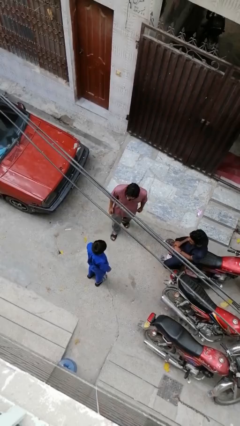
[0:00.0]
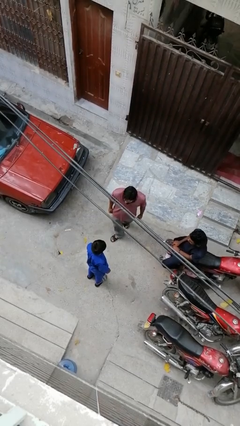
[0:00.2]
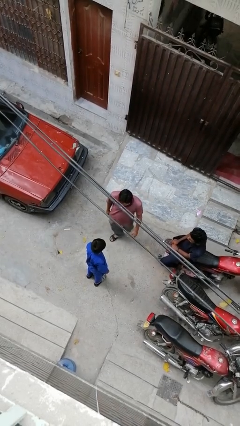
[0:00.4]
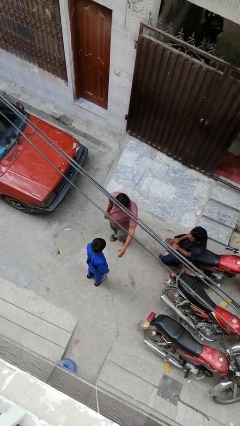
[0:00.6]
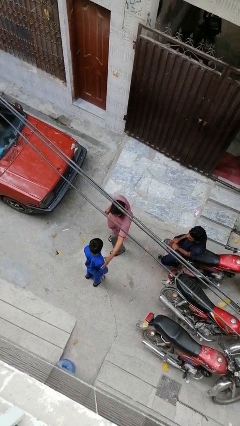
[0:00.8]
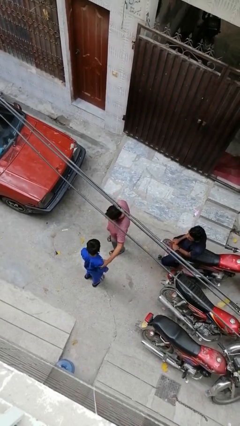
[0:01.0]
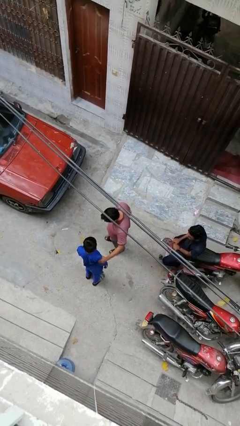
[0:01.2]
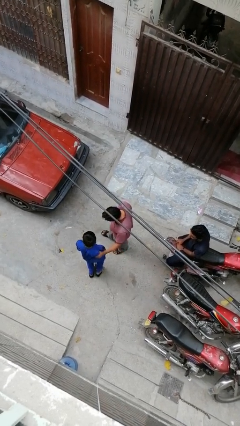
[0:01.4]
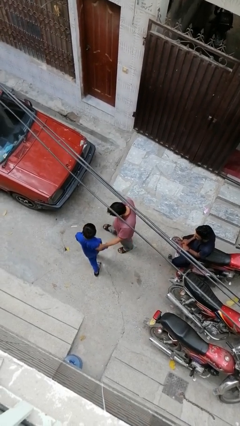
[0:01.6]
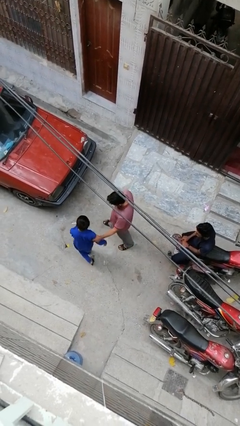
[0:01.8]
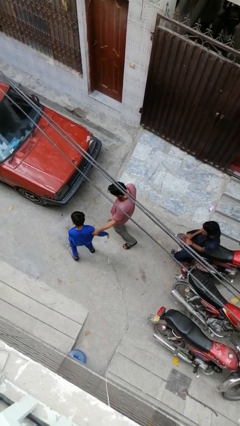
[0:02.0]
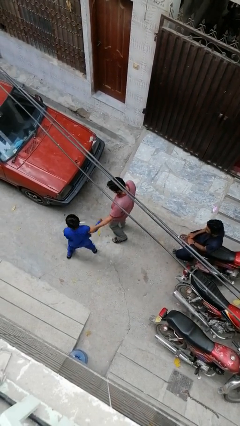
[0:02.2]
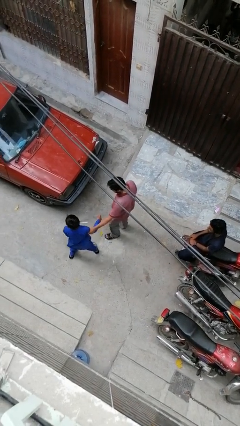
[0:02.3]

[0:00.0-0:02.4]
person grabs person by bicep

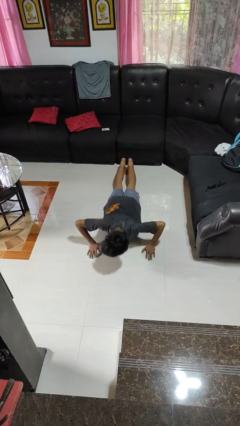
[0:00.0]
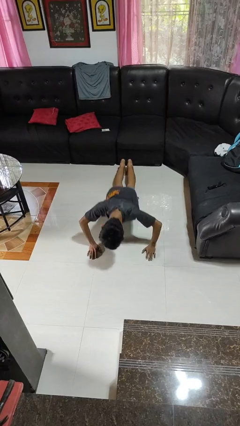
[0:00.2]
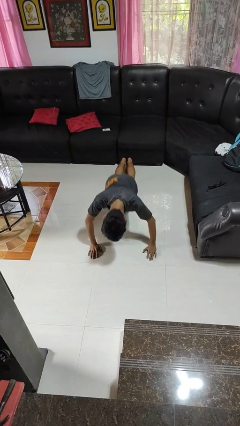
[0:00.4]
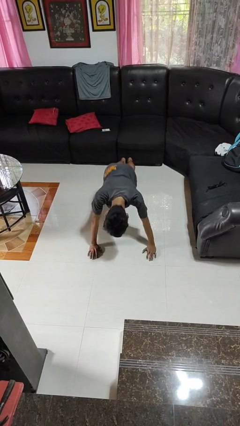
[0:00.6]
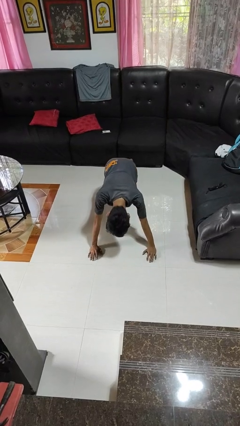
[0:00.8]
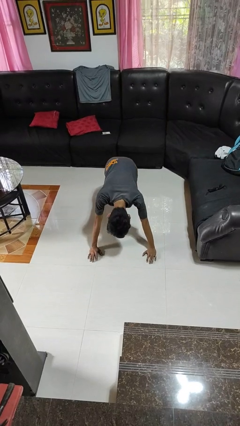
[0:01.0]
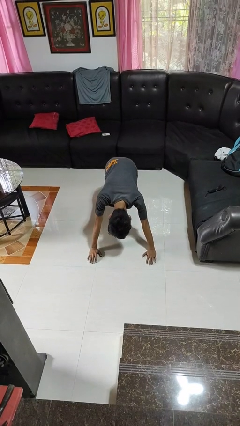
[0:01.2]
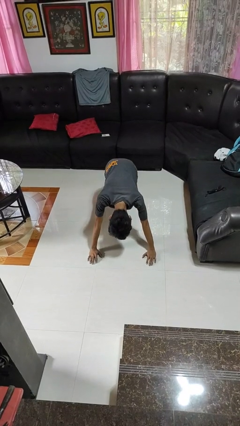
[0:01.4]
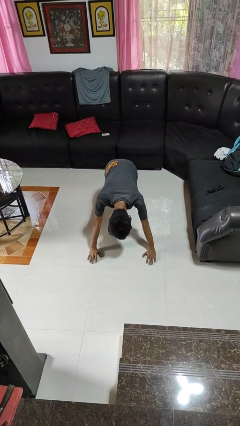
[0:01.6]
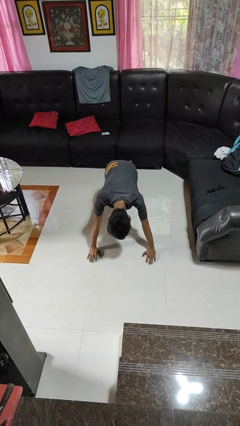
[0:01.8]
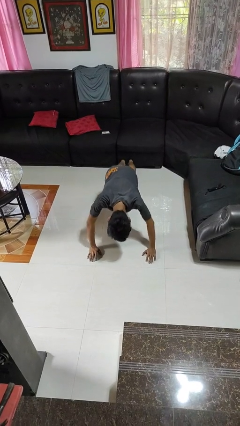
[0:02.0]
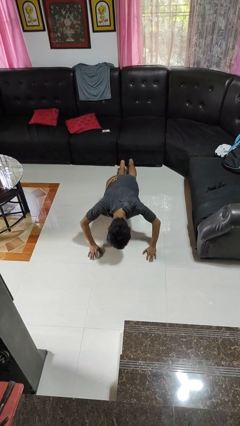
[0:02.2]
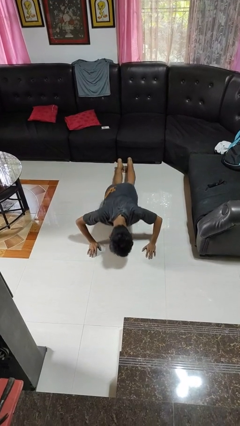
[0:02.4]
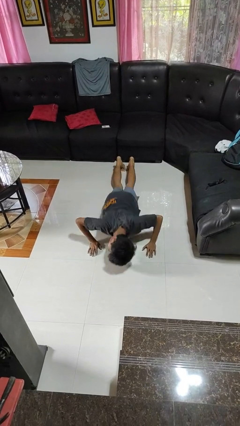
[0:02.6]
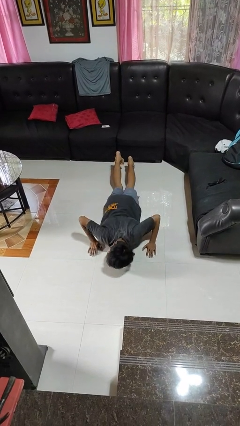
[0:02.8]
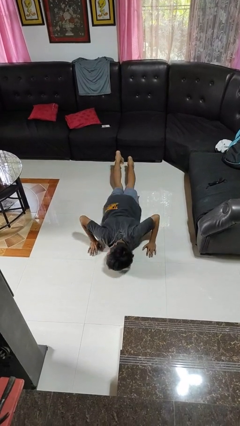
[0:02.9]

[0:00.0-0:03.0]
person exercises with pushup

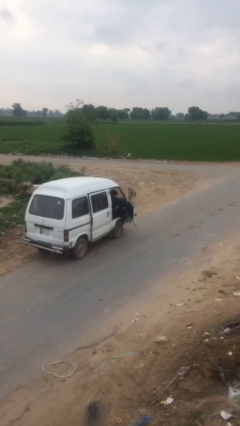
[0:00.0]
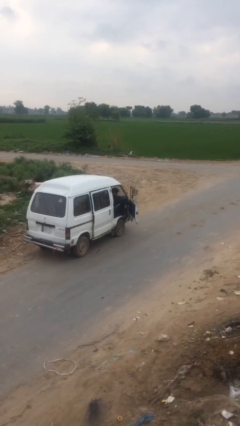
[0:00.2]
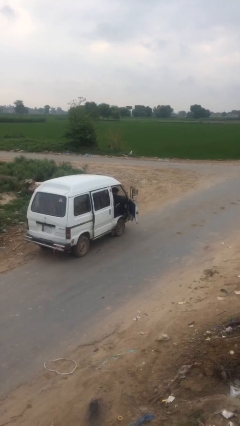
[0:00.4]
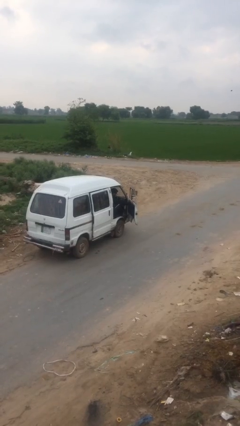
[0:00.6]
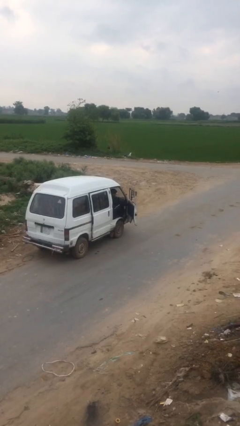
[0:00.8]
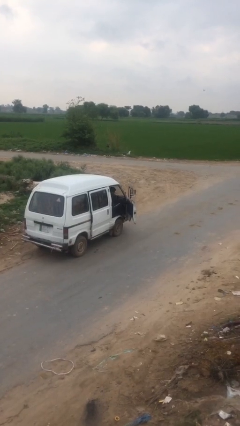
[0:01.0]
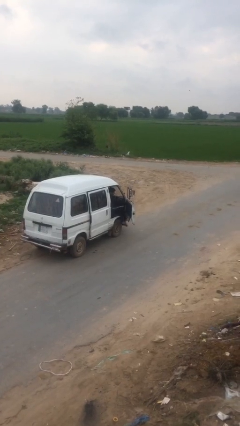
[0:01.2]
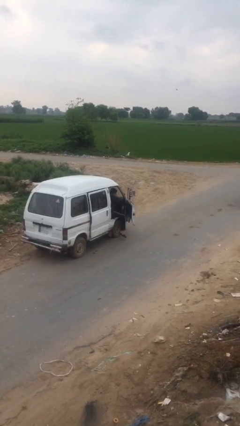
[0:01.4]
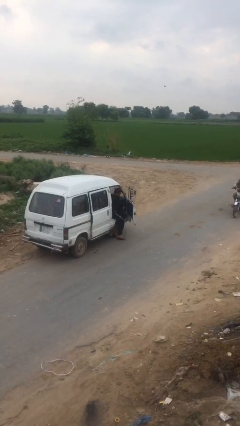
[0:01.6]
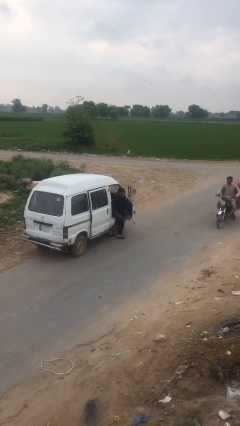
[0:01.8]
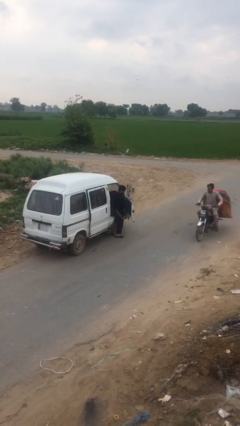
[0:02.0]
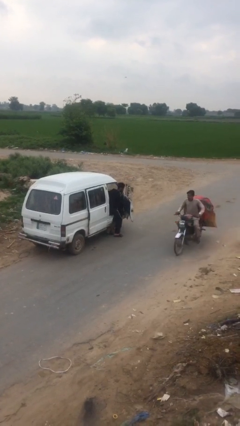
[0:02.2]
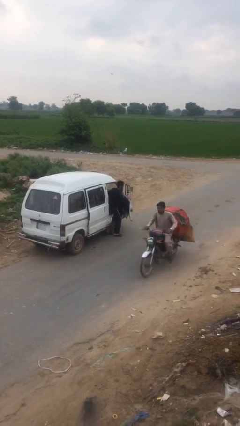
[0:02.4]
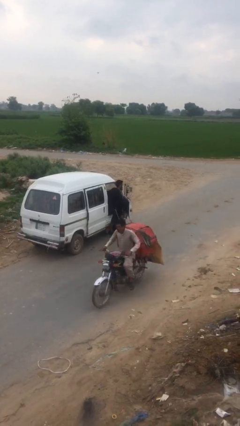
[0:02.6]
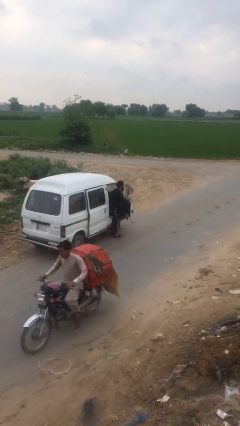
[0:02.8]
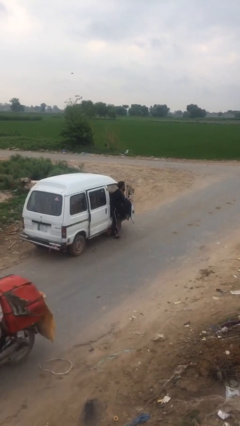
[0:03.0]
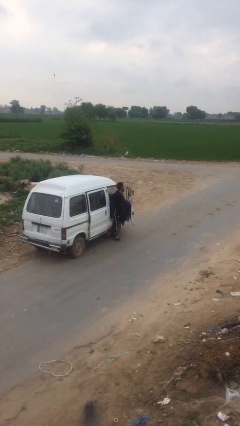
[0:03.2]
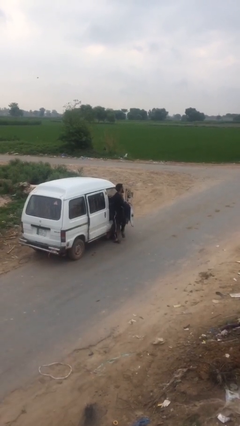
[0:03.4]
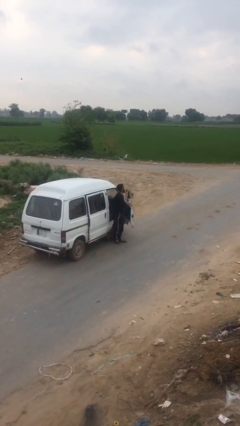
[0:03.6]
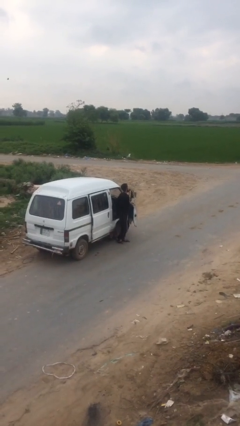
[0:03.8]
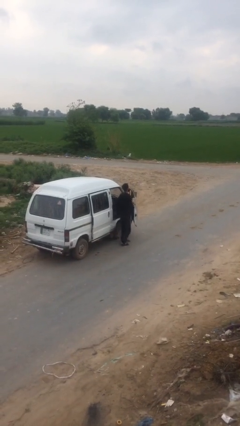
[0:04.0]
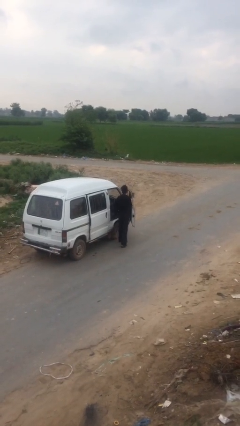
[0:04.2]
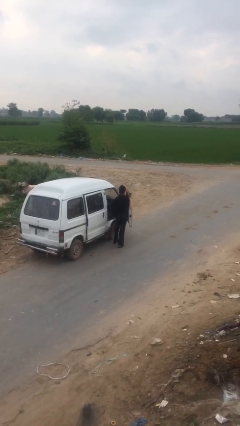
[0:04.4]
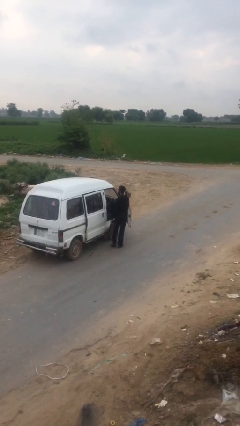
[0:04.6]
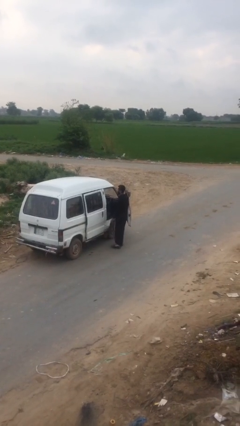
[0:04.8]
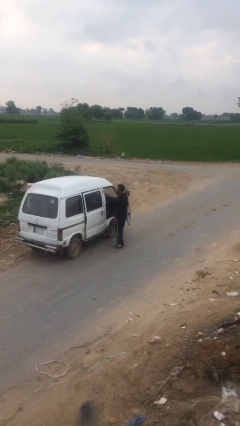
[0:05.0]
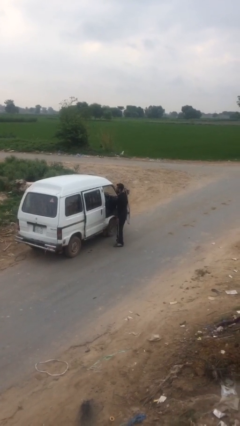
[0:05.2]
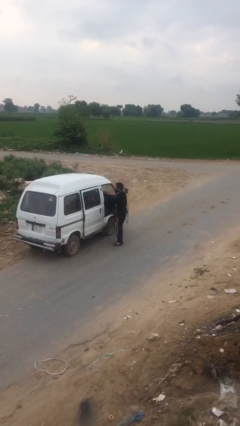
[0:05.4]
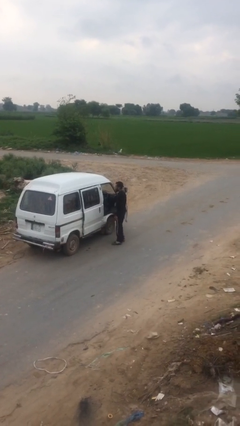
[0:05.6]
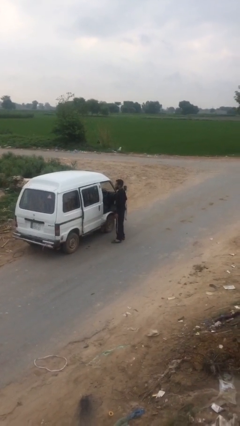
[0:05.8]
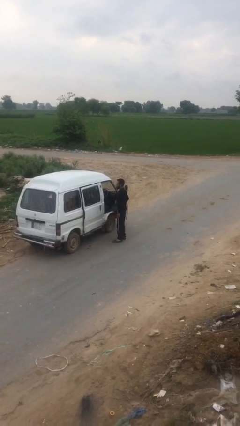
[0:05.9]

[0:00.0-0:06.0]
person exits car

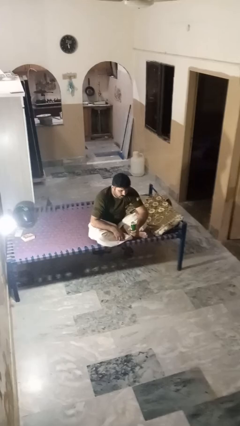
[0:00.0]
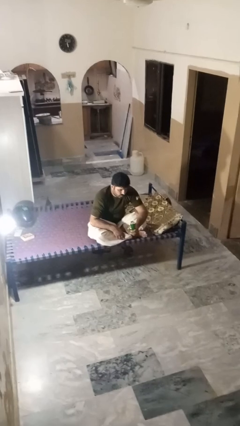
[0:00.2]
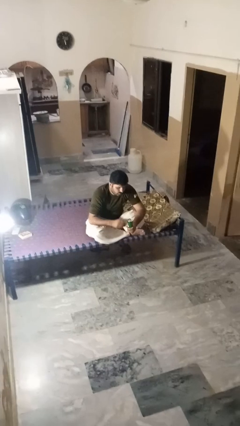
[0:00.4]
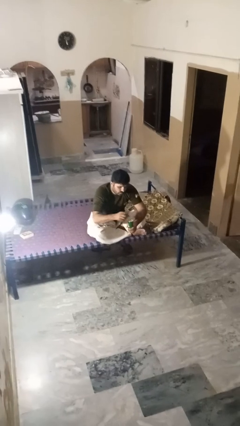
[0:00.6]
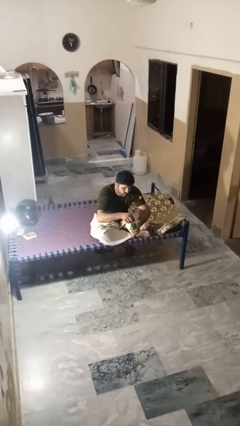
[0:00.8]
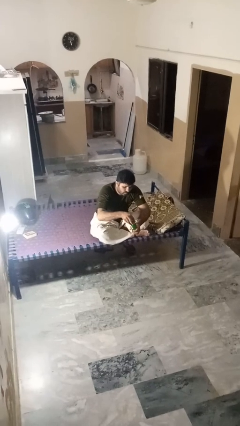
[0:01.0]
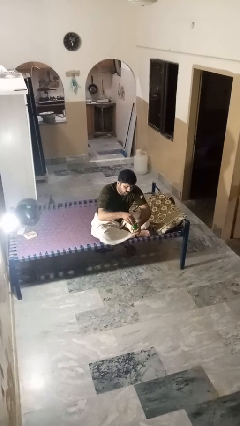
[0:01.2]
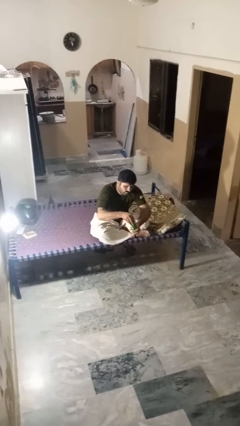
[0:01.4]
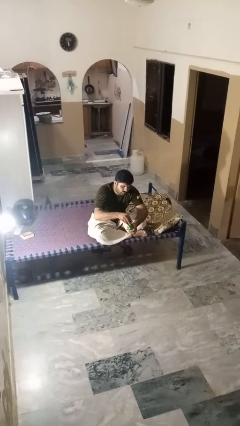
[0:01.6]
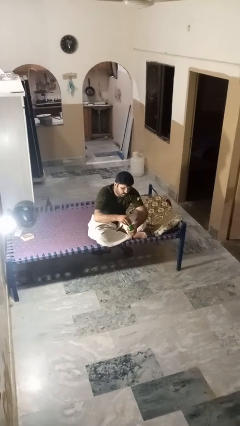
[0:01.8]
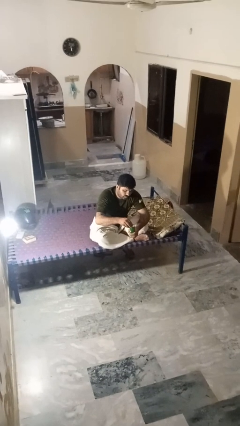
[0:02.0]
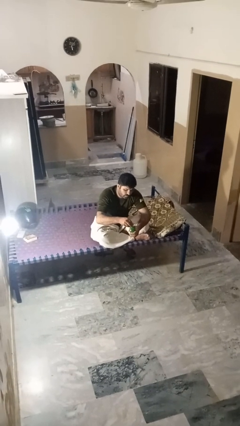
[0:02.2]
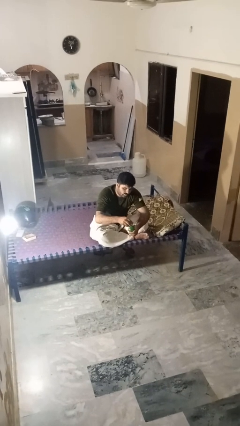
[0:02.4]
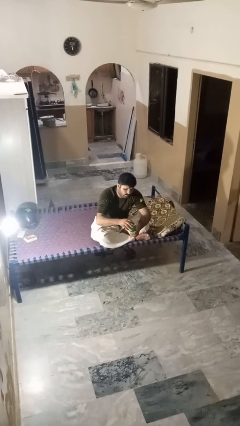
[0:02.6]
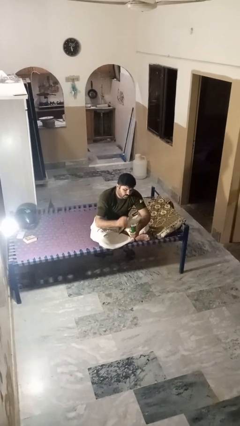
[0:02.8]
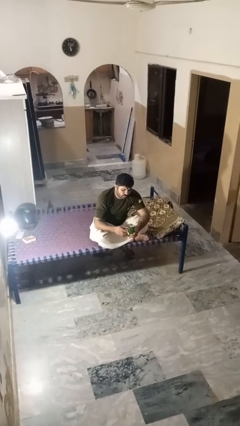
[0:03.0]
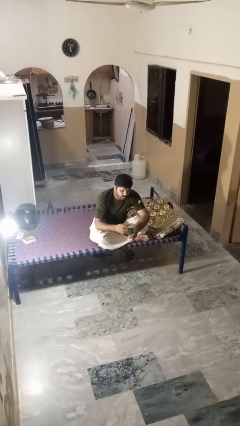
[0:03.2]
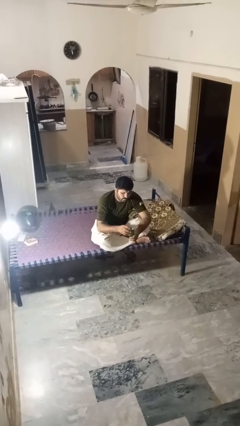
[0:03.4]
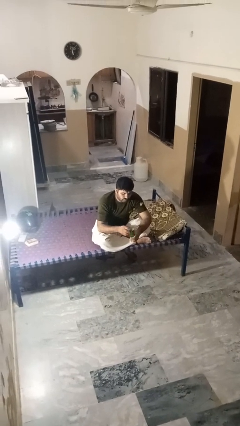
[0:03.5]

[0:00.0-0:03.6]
person opens beverage can

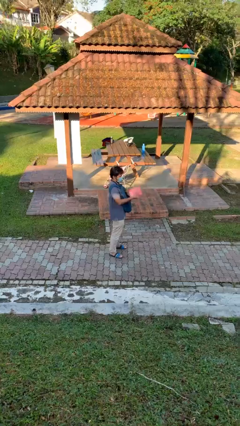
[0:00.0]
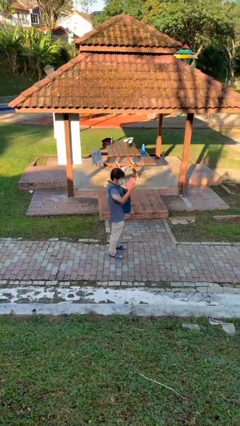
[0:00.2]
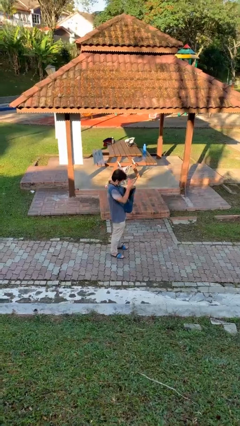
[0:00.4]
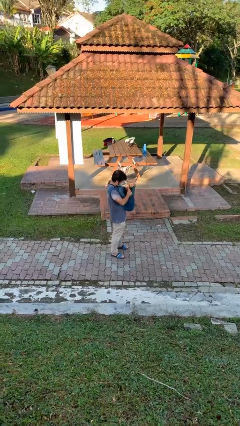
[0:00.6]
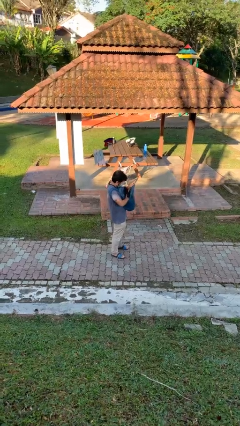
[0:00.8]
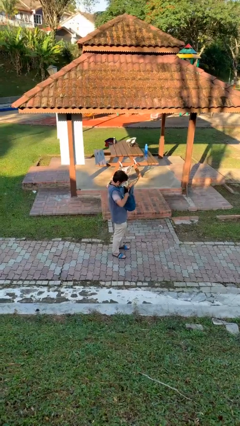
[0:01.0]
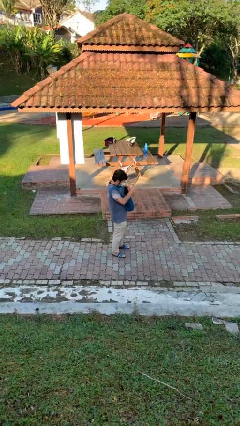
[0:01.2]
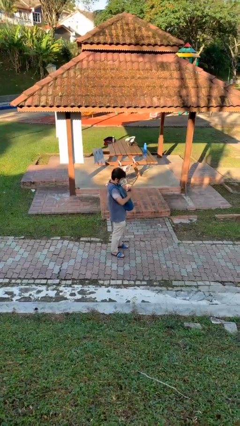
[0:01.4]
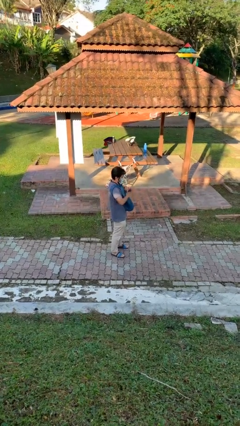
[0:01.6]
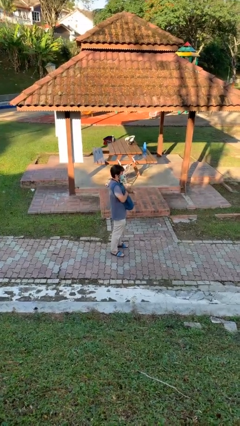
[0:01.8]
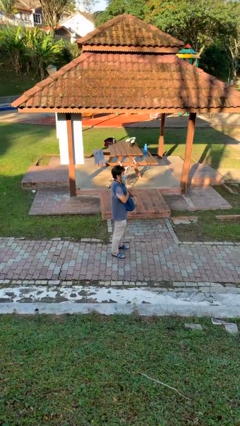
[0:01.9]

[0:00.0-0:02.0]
person puts object into backpack

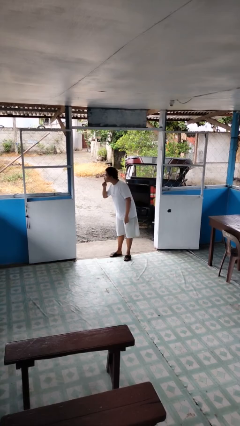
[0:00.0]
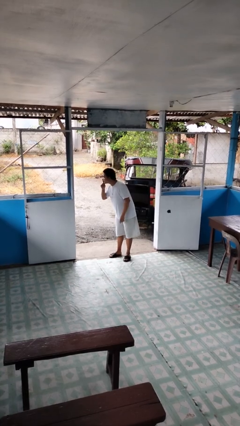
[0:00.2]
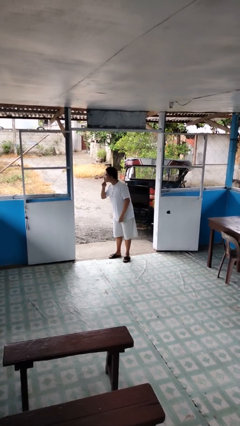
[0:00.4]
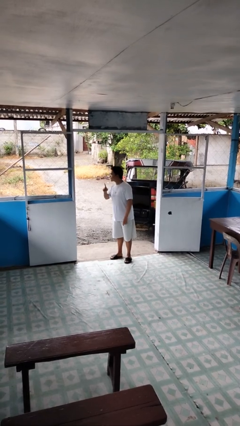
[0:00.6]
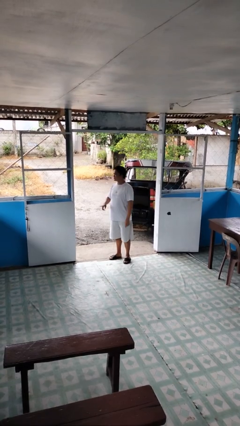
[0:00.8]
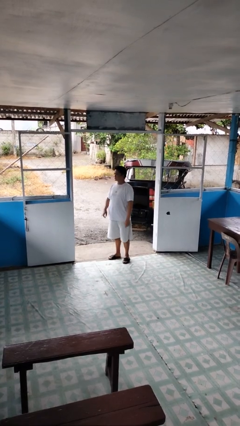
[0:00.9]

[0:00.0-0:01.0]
person gestures be quiet
